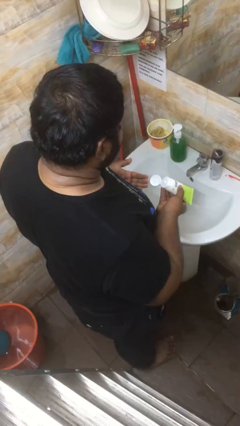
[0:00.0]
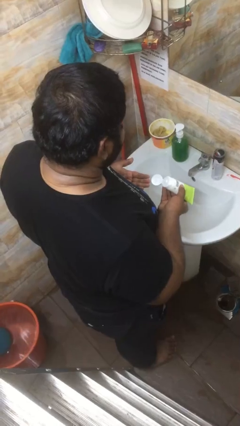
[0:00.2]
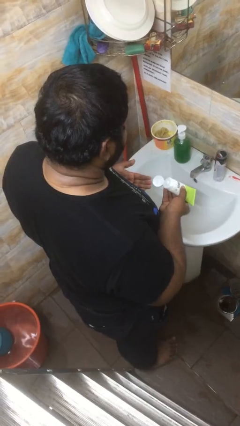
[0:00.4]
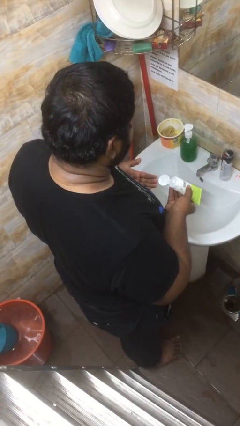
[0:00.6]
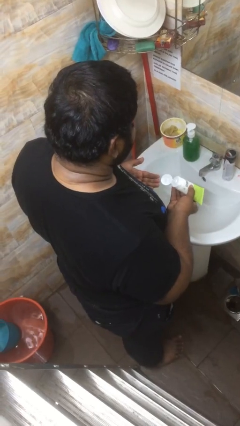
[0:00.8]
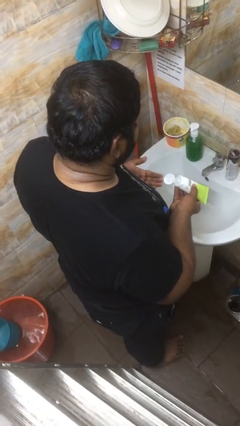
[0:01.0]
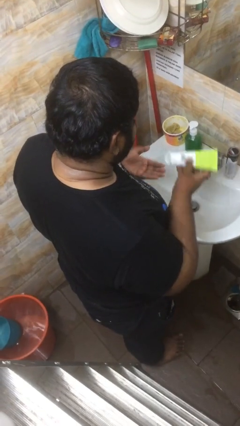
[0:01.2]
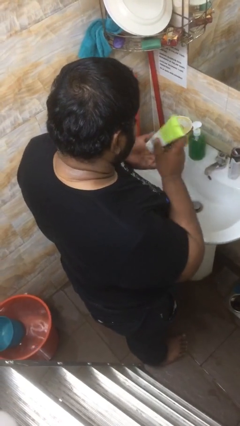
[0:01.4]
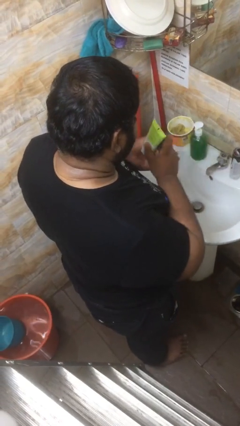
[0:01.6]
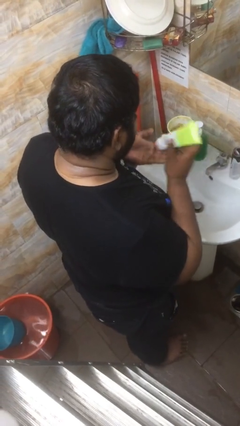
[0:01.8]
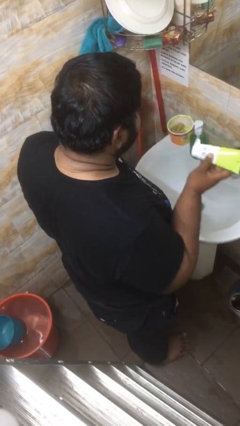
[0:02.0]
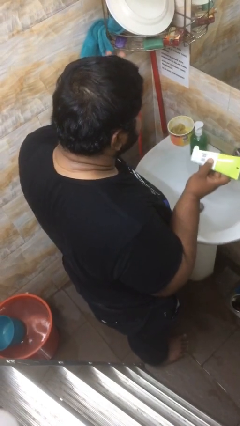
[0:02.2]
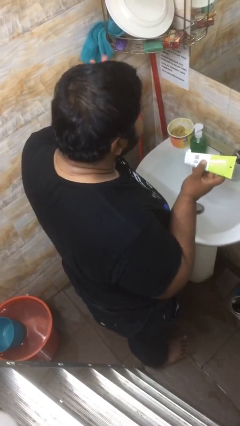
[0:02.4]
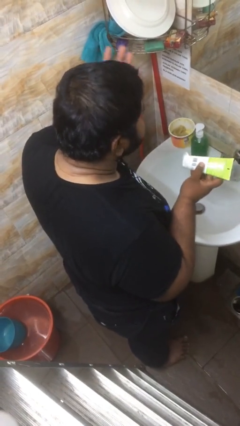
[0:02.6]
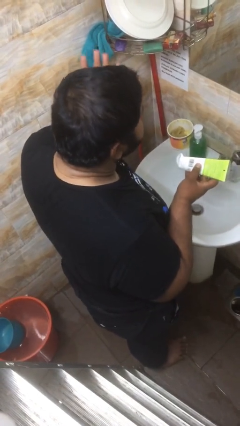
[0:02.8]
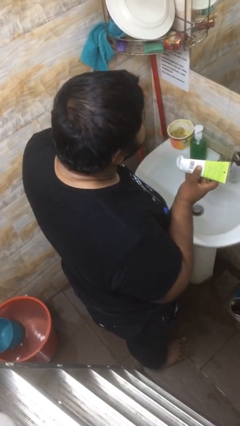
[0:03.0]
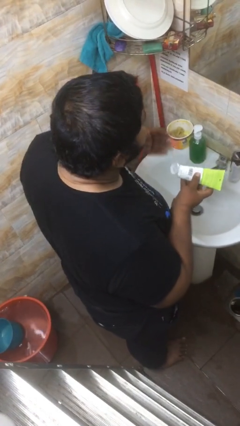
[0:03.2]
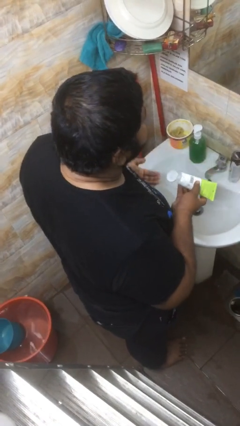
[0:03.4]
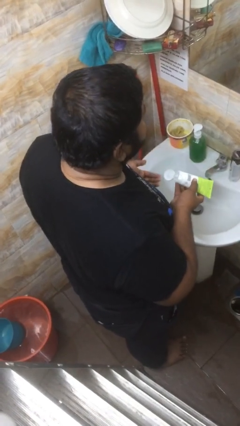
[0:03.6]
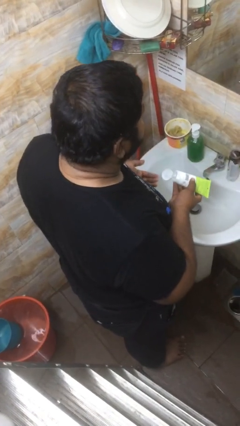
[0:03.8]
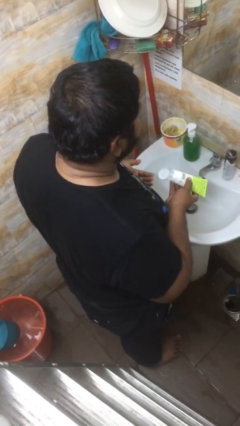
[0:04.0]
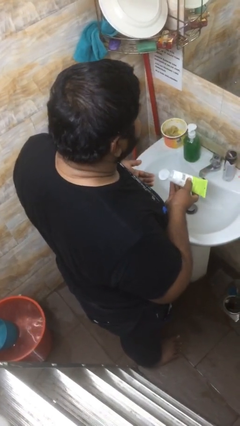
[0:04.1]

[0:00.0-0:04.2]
person applies facial moisturizer

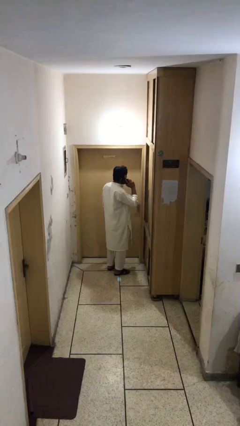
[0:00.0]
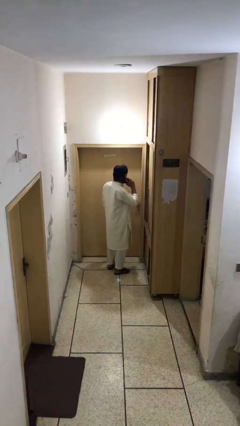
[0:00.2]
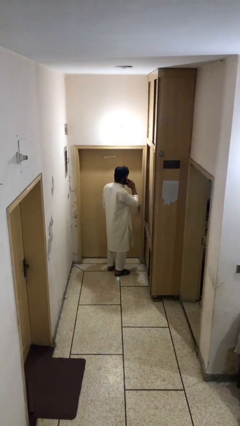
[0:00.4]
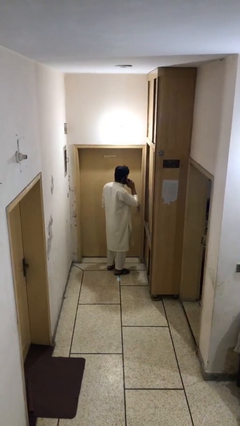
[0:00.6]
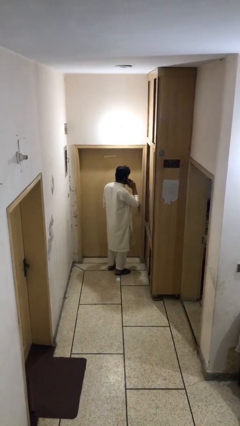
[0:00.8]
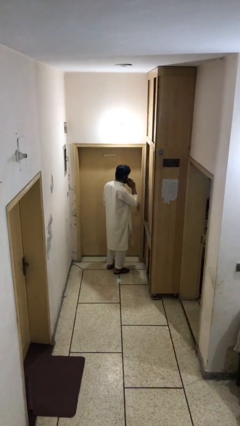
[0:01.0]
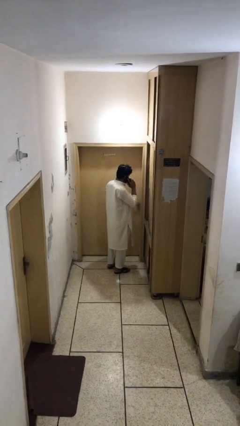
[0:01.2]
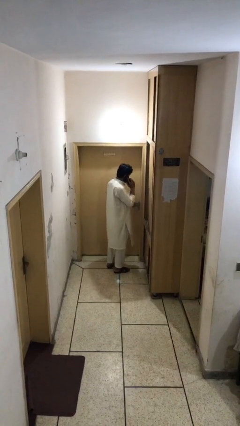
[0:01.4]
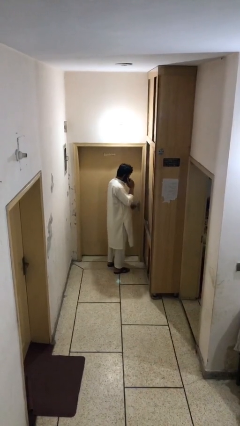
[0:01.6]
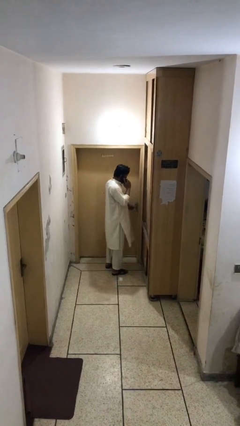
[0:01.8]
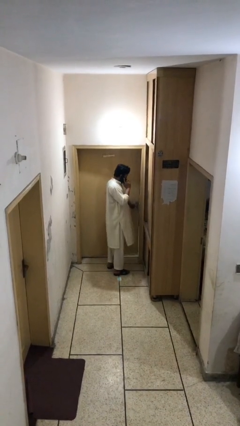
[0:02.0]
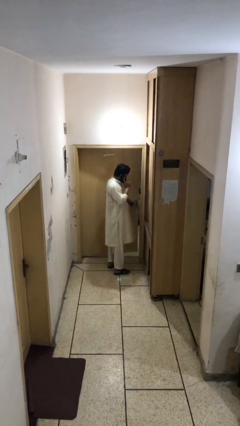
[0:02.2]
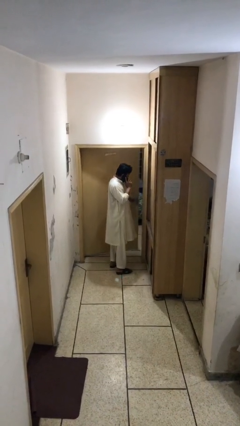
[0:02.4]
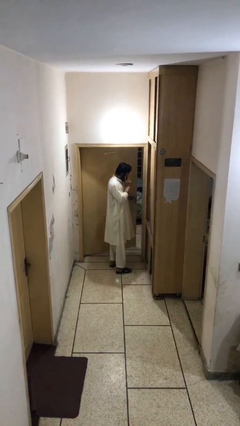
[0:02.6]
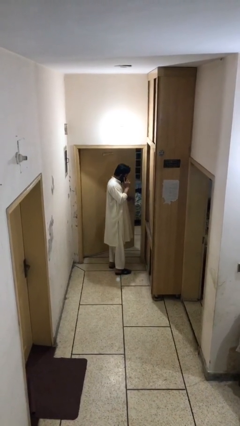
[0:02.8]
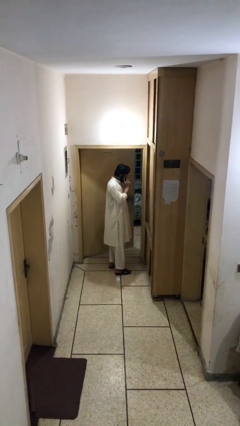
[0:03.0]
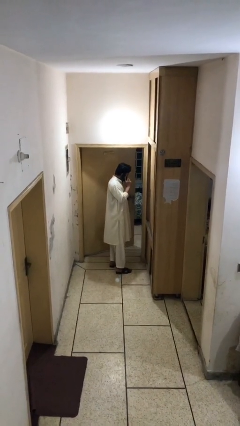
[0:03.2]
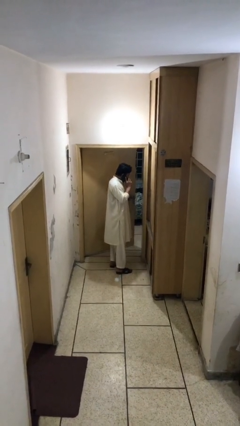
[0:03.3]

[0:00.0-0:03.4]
person opens facility door

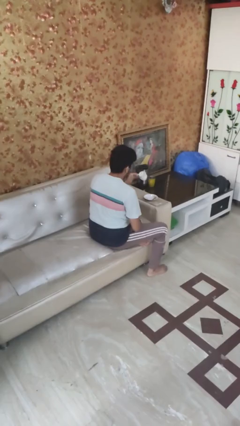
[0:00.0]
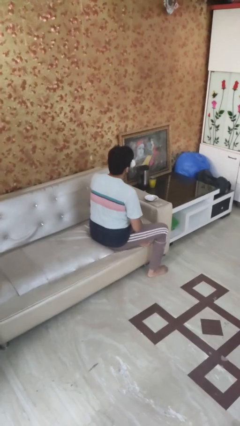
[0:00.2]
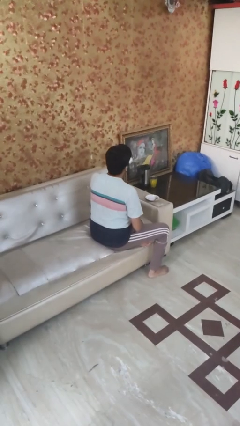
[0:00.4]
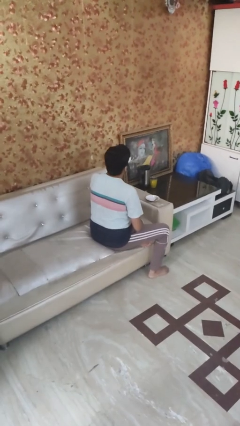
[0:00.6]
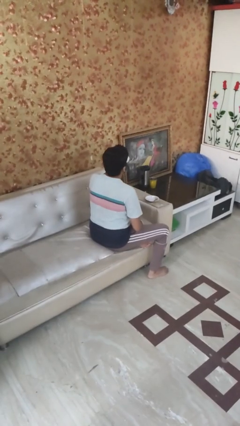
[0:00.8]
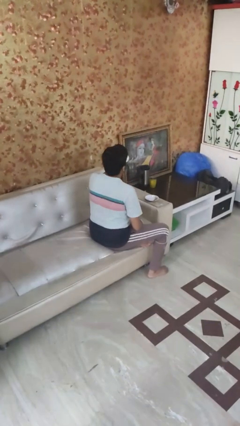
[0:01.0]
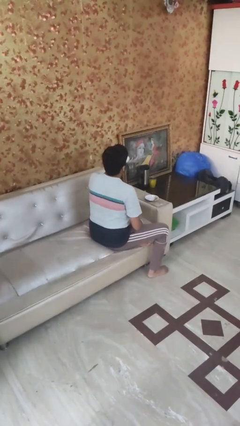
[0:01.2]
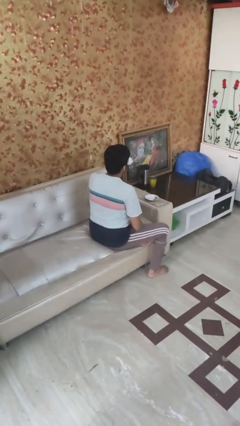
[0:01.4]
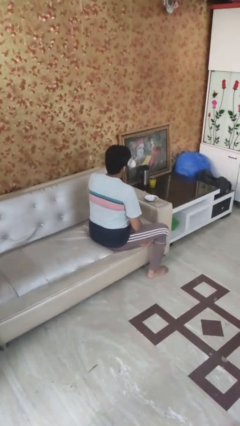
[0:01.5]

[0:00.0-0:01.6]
person drinks from mug

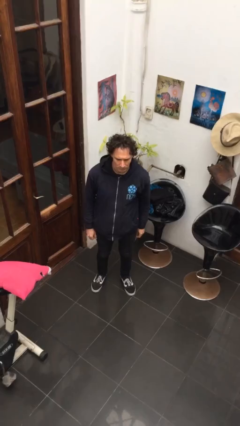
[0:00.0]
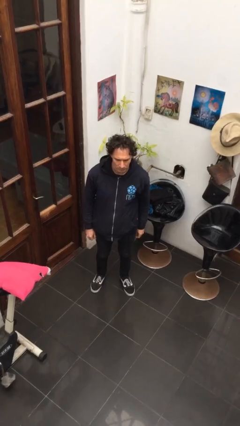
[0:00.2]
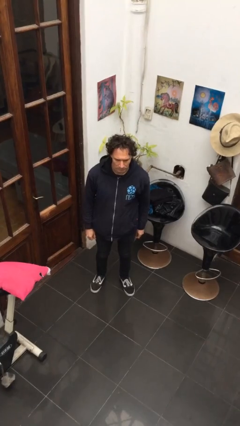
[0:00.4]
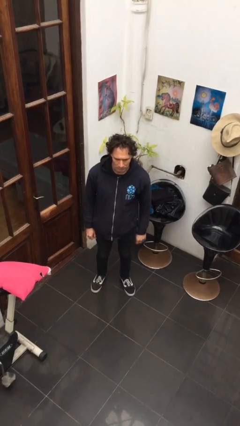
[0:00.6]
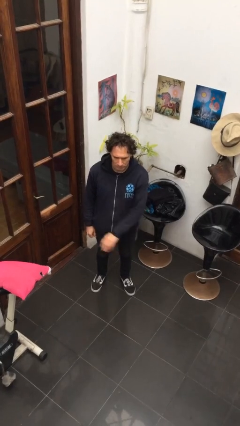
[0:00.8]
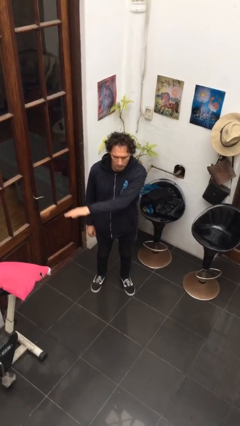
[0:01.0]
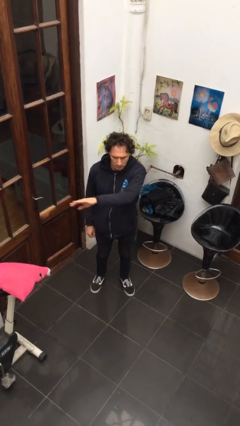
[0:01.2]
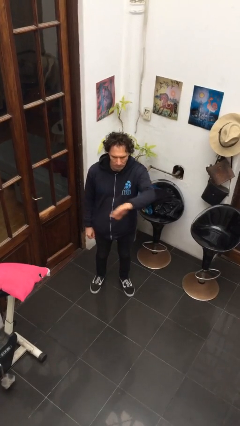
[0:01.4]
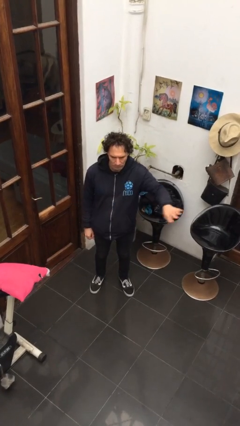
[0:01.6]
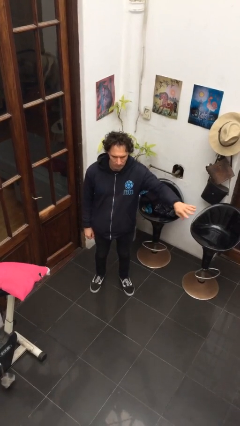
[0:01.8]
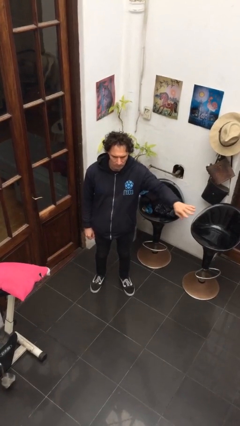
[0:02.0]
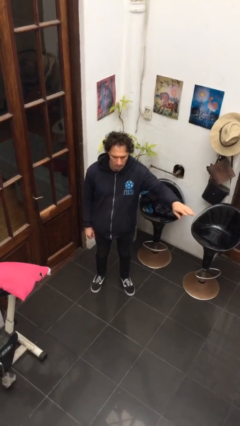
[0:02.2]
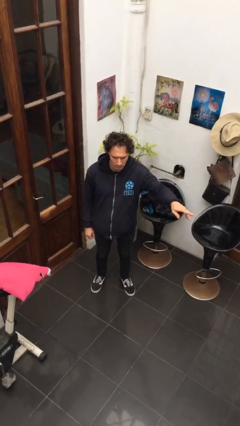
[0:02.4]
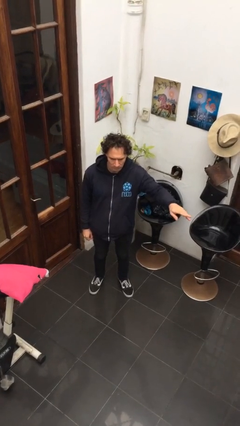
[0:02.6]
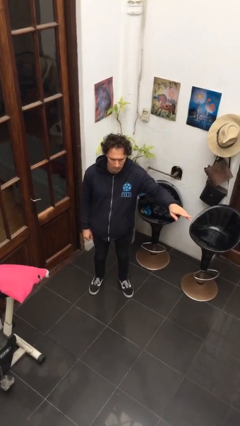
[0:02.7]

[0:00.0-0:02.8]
person gestures swipe left

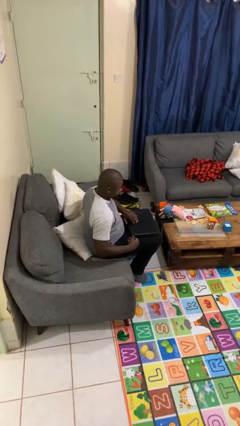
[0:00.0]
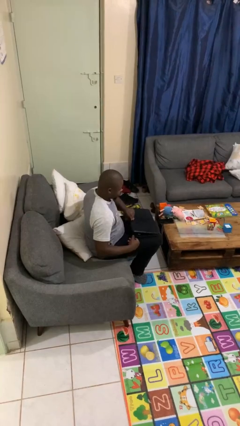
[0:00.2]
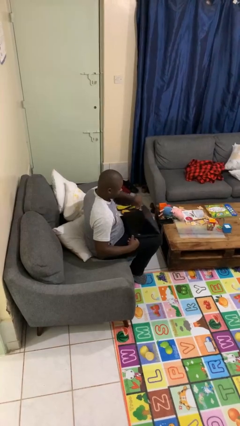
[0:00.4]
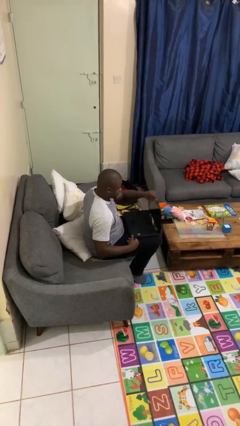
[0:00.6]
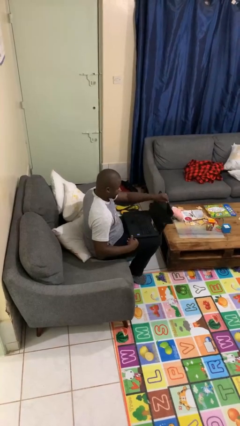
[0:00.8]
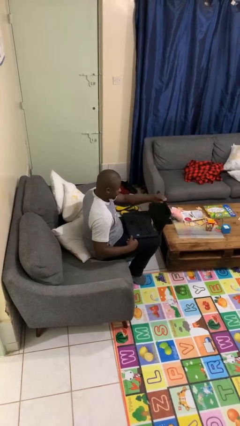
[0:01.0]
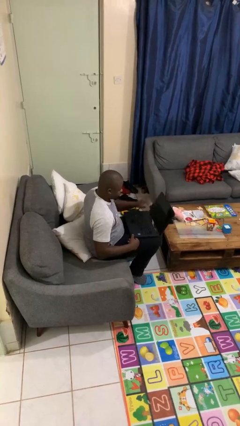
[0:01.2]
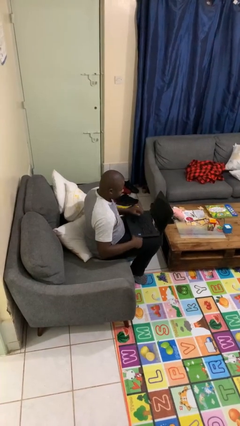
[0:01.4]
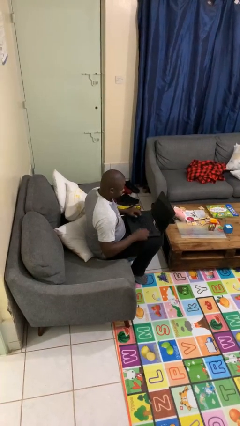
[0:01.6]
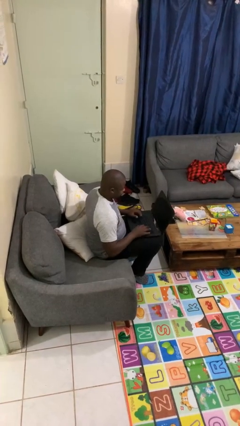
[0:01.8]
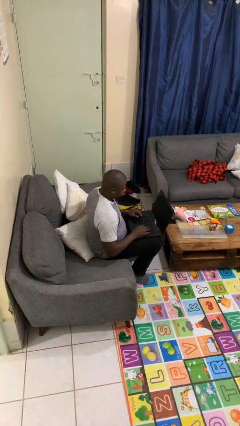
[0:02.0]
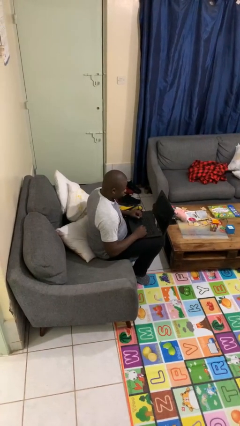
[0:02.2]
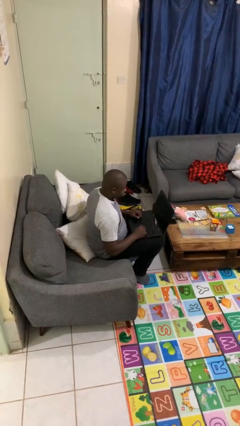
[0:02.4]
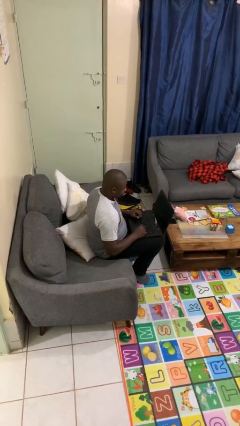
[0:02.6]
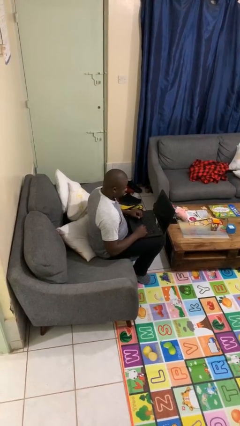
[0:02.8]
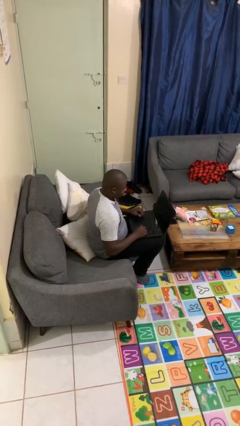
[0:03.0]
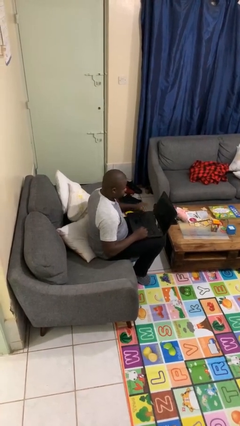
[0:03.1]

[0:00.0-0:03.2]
person opens laptop

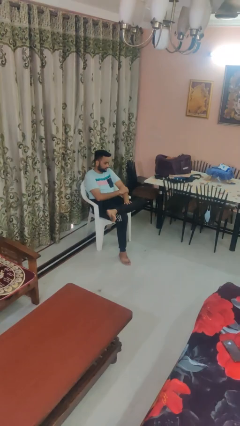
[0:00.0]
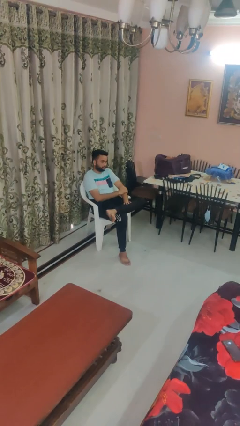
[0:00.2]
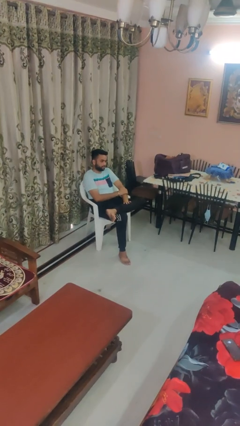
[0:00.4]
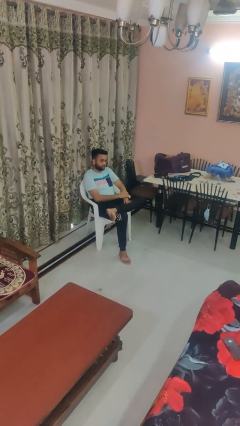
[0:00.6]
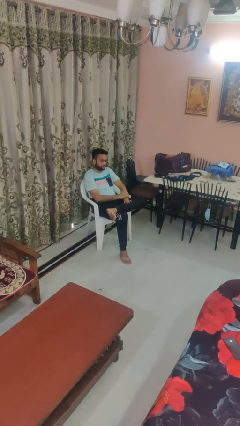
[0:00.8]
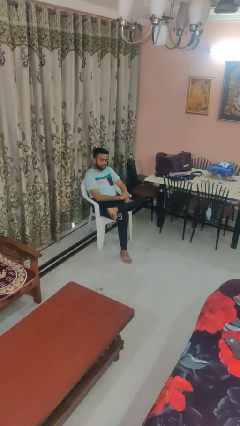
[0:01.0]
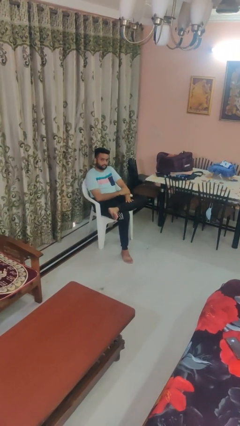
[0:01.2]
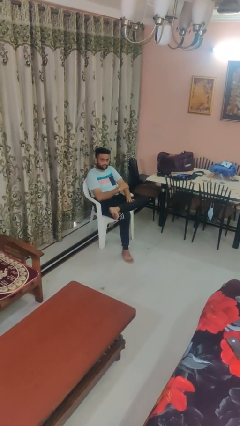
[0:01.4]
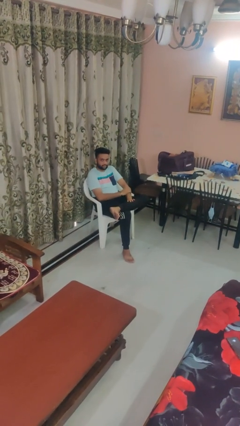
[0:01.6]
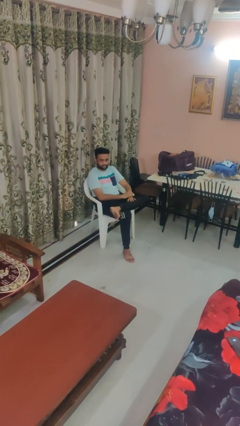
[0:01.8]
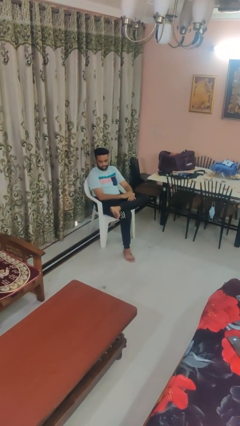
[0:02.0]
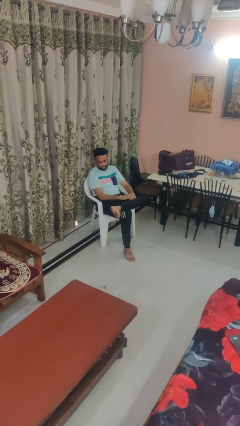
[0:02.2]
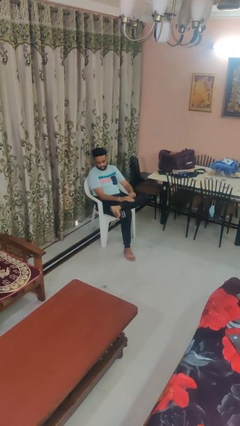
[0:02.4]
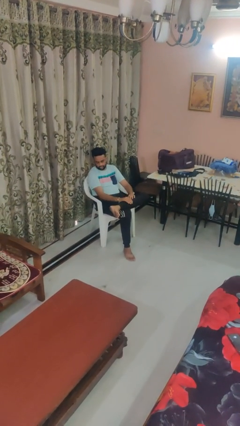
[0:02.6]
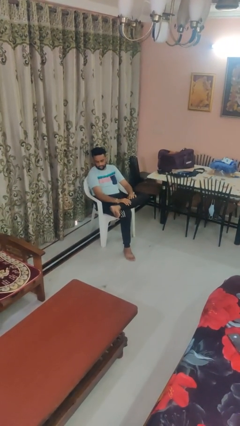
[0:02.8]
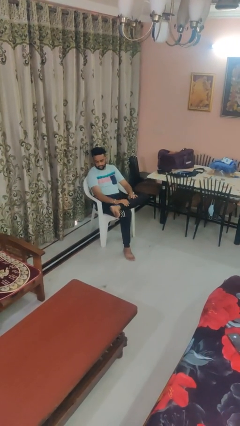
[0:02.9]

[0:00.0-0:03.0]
person swats bug
